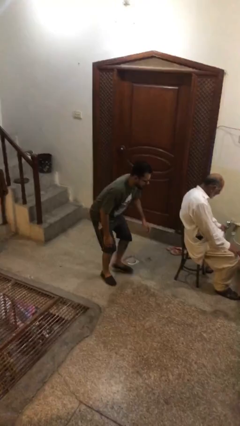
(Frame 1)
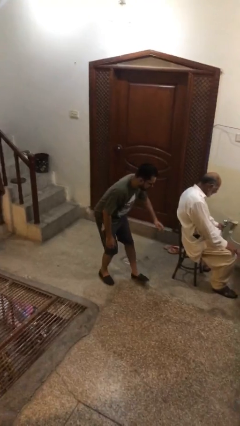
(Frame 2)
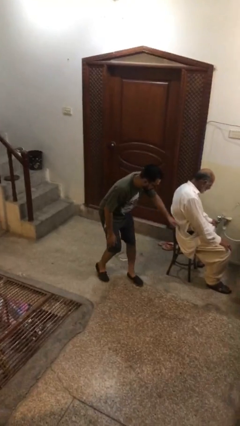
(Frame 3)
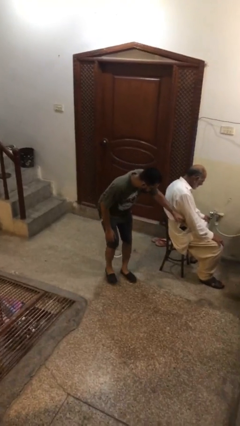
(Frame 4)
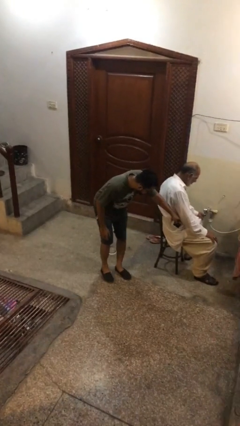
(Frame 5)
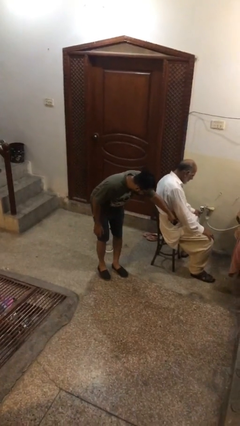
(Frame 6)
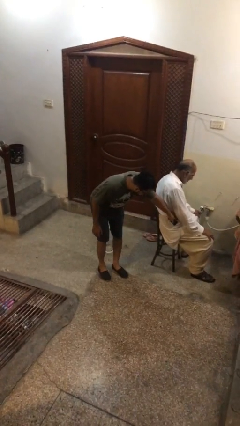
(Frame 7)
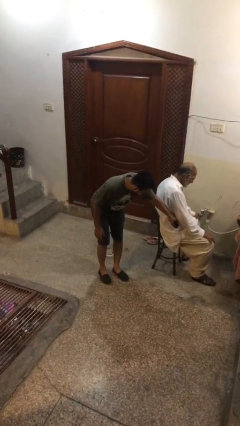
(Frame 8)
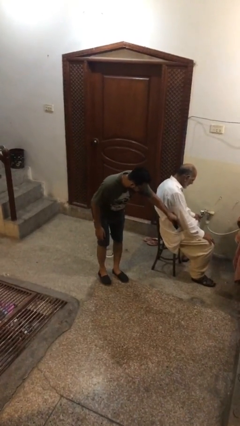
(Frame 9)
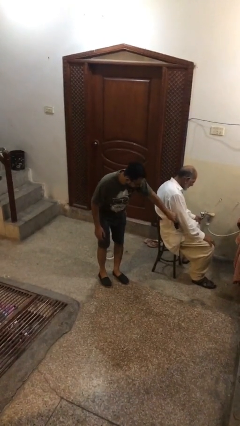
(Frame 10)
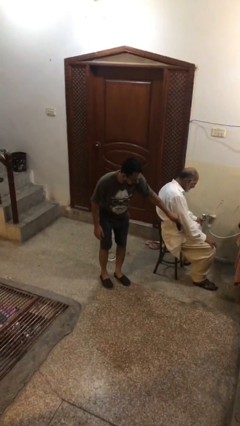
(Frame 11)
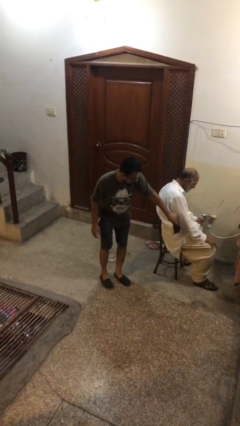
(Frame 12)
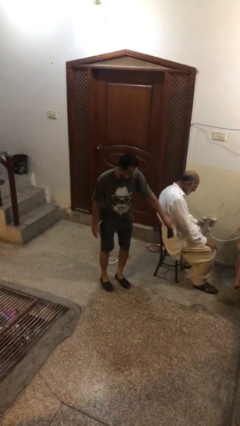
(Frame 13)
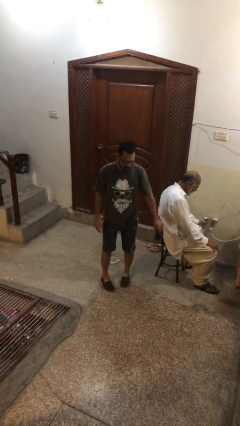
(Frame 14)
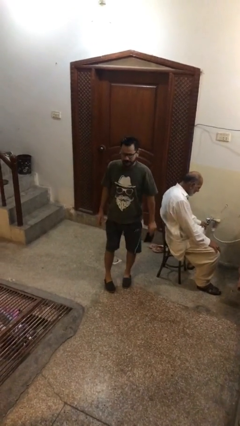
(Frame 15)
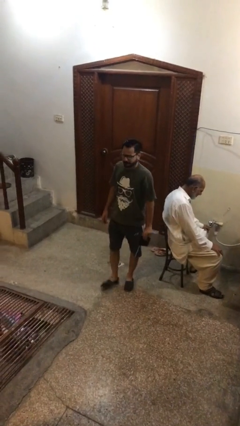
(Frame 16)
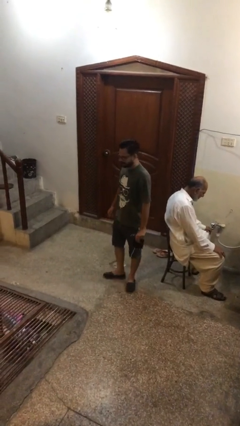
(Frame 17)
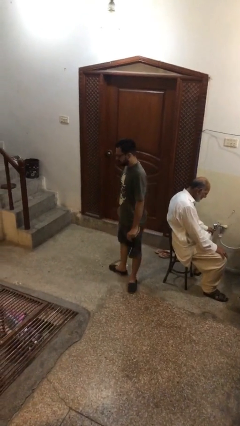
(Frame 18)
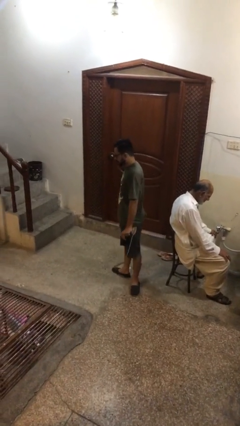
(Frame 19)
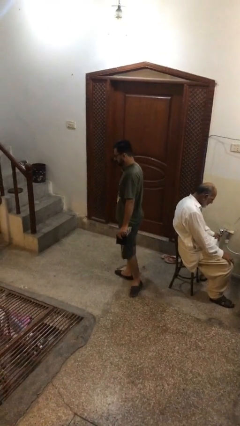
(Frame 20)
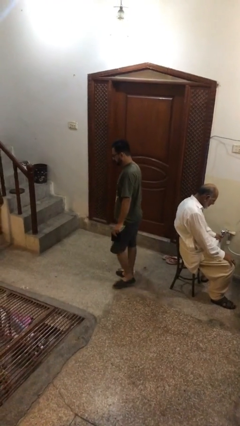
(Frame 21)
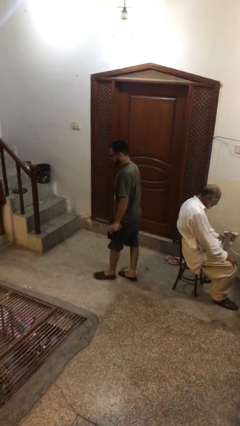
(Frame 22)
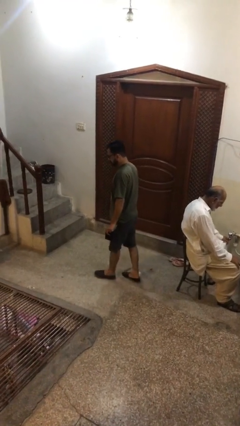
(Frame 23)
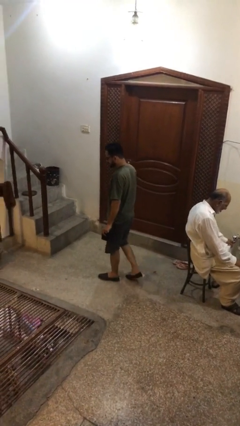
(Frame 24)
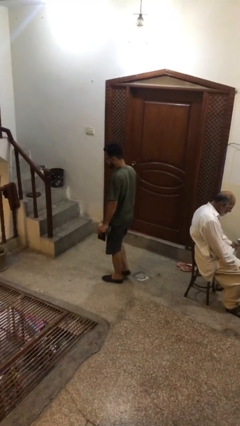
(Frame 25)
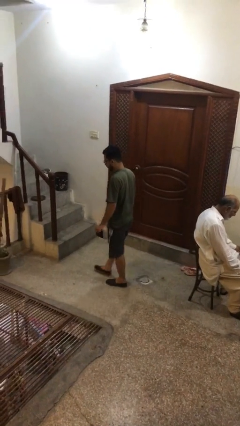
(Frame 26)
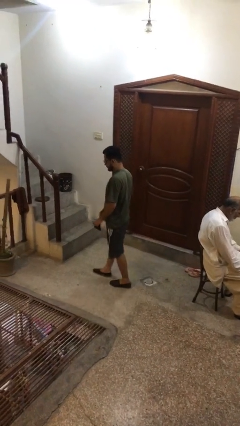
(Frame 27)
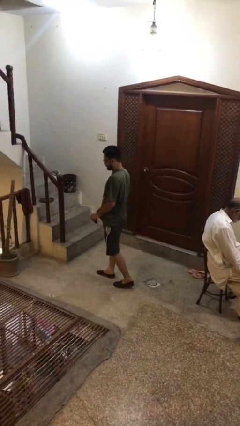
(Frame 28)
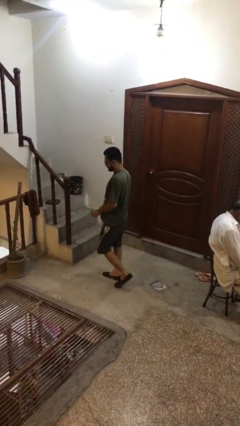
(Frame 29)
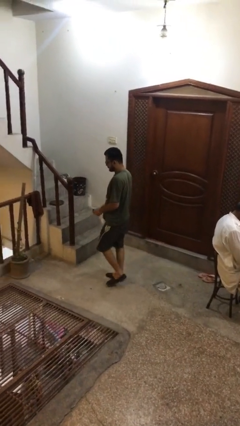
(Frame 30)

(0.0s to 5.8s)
person steals object from person

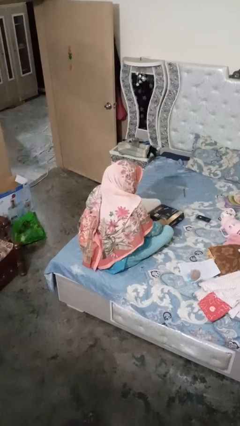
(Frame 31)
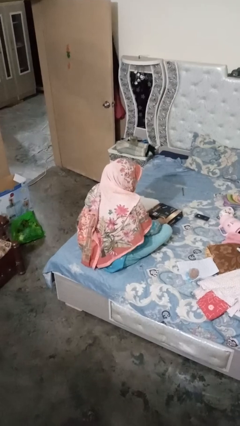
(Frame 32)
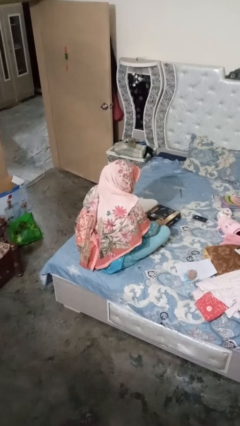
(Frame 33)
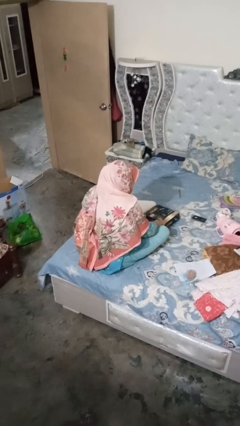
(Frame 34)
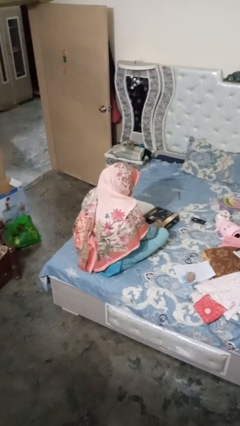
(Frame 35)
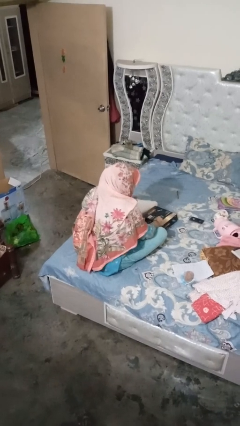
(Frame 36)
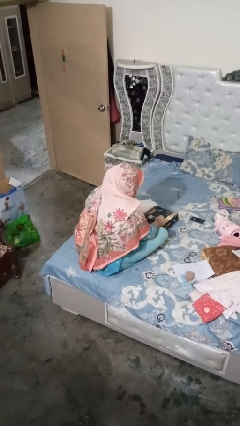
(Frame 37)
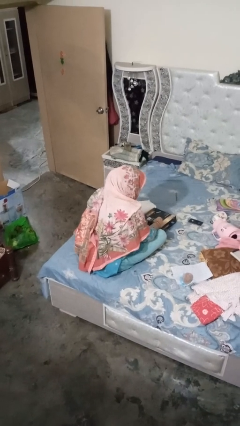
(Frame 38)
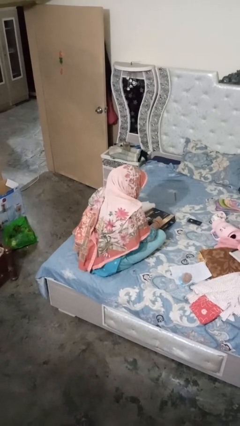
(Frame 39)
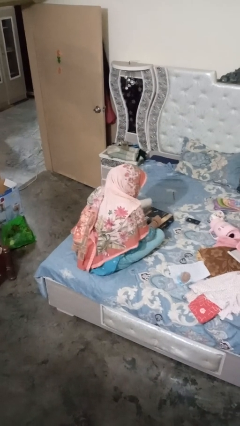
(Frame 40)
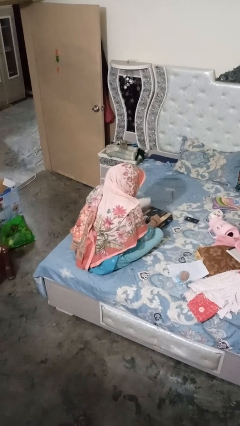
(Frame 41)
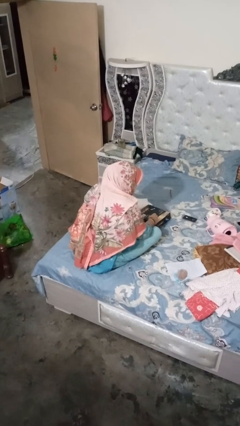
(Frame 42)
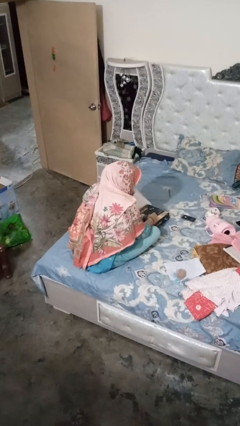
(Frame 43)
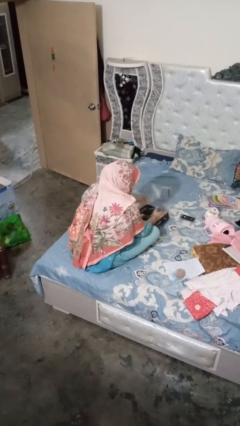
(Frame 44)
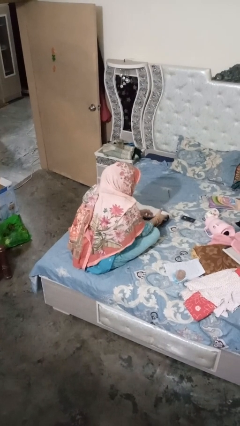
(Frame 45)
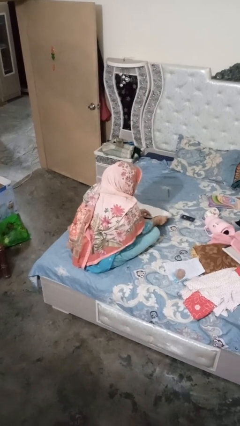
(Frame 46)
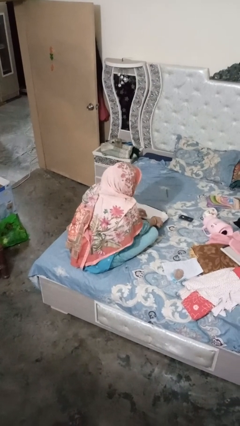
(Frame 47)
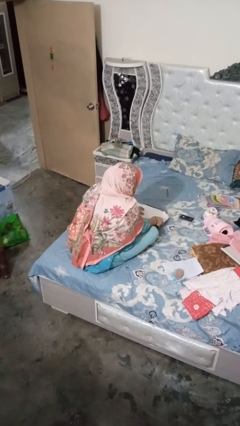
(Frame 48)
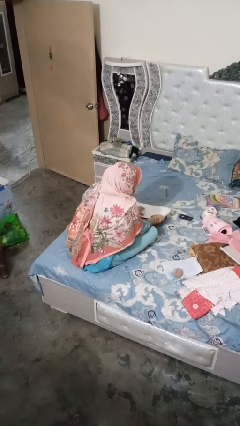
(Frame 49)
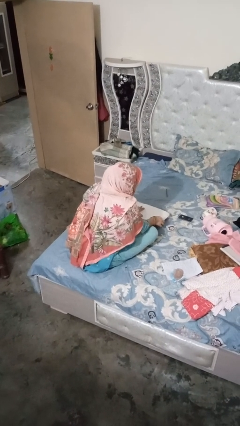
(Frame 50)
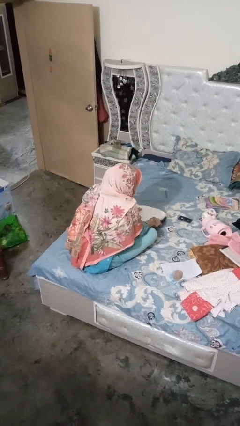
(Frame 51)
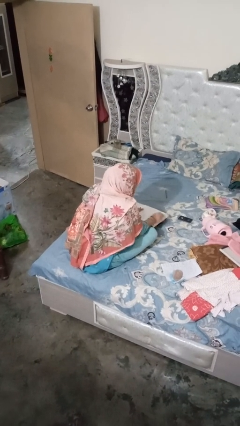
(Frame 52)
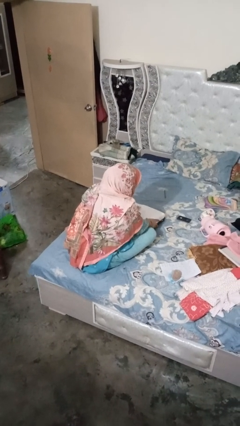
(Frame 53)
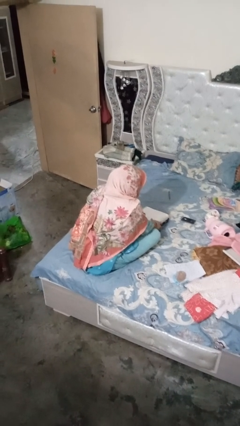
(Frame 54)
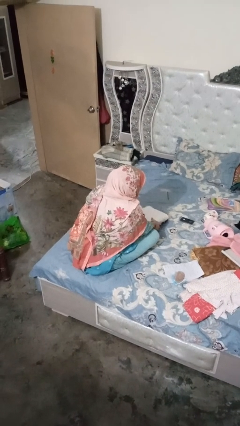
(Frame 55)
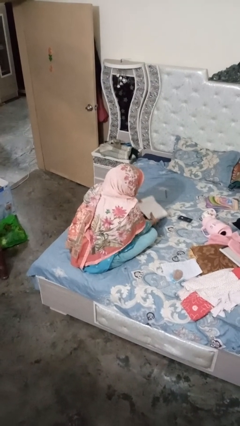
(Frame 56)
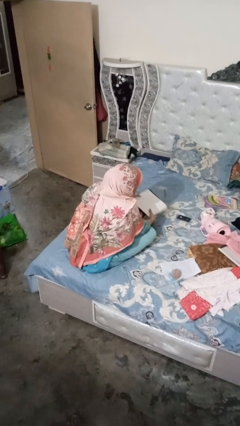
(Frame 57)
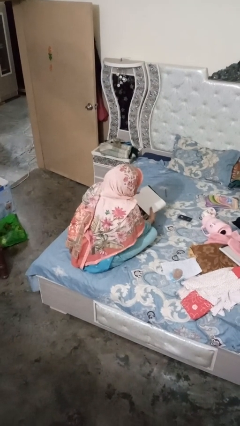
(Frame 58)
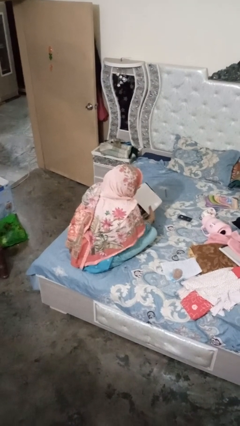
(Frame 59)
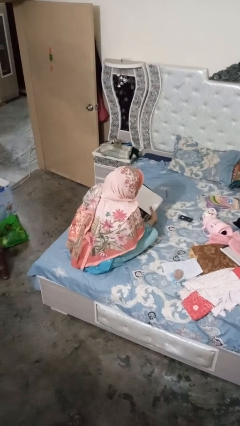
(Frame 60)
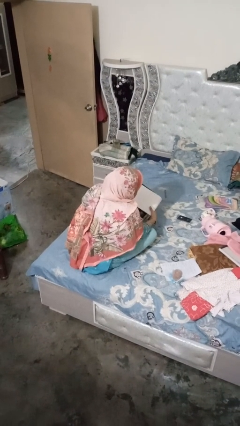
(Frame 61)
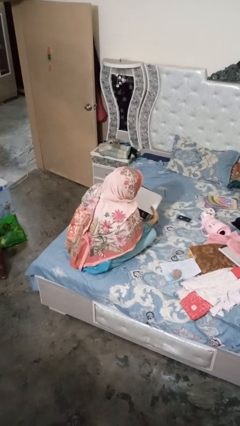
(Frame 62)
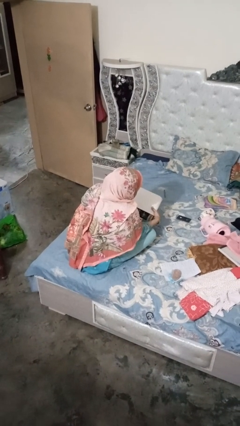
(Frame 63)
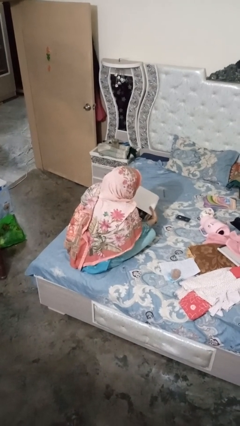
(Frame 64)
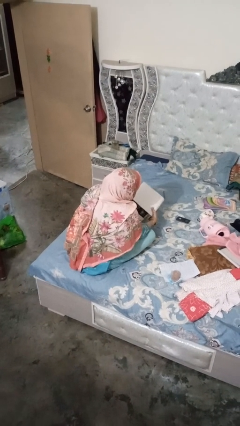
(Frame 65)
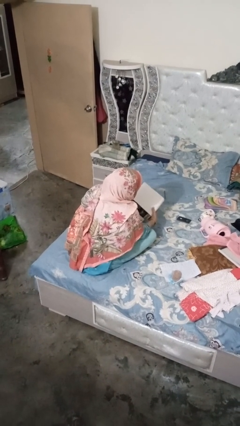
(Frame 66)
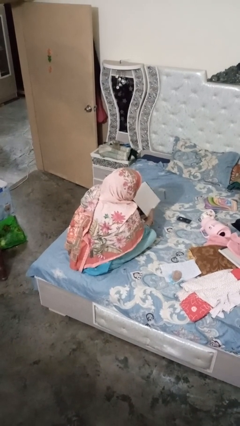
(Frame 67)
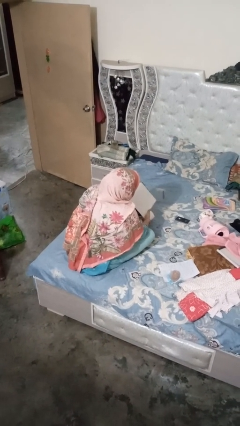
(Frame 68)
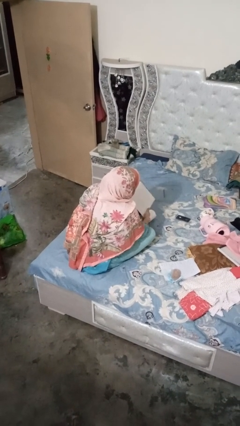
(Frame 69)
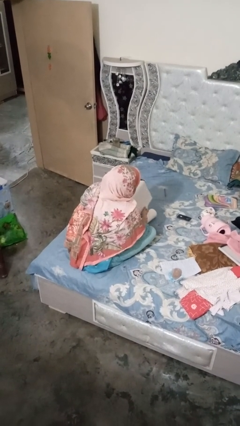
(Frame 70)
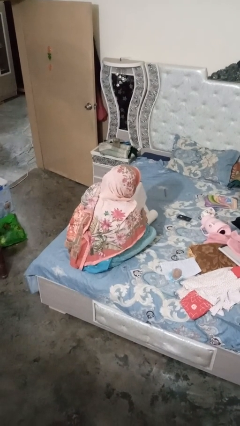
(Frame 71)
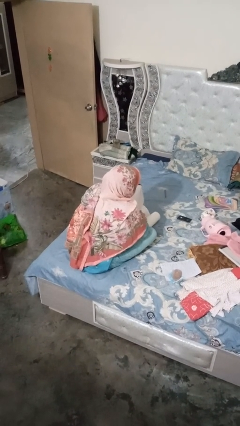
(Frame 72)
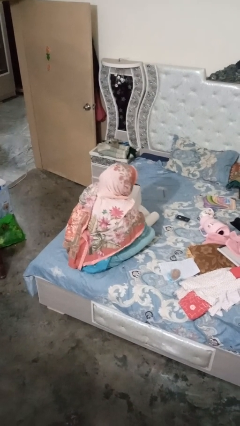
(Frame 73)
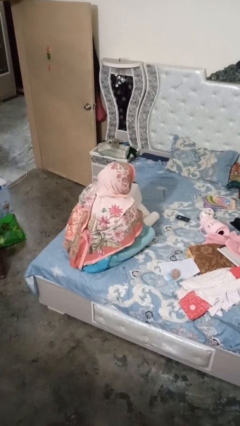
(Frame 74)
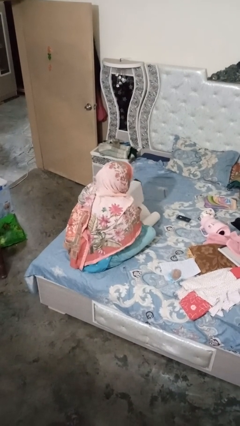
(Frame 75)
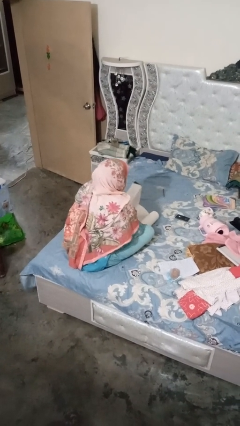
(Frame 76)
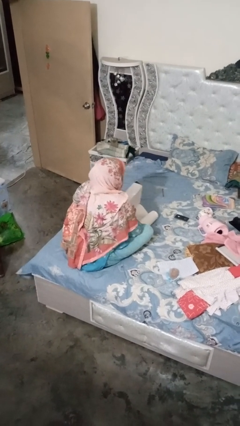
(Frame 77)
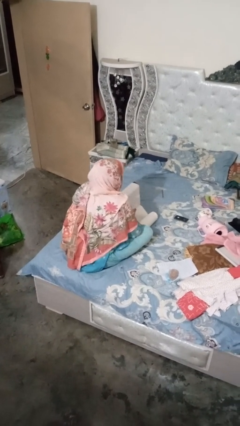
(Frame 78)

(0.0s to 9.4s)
person wraps box

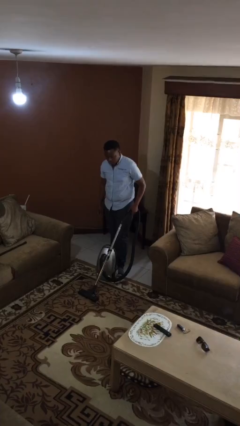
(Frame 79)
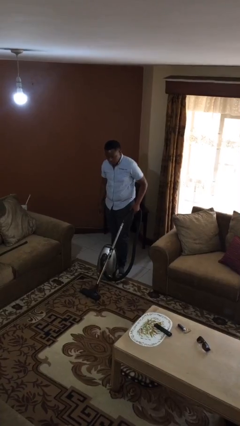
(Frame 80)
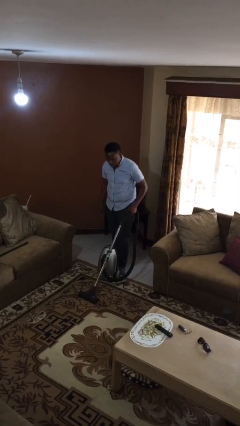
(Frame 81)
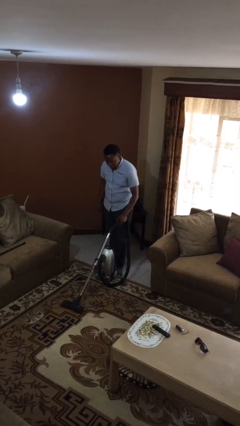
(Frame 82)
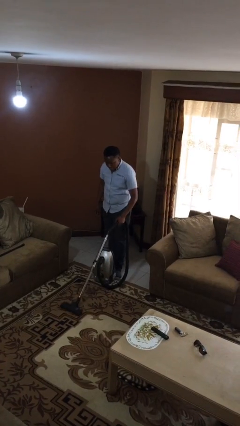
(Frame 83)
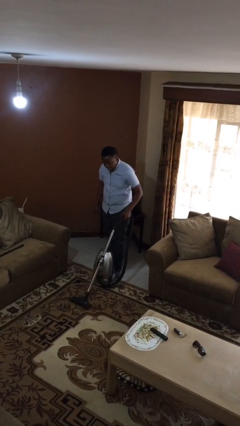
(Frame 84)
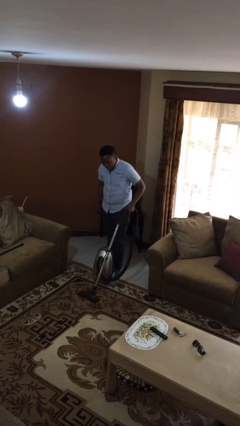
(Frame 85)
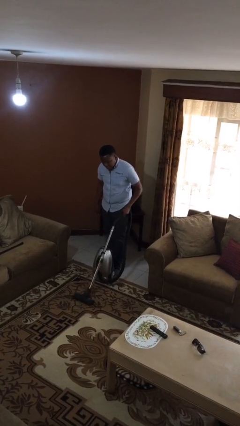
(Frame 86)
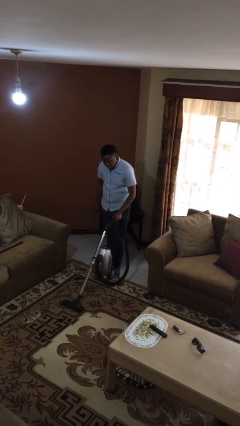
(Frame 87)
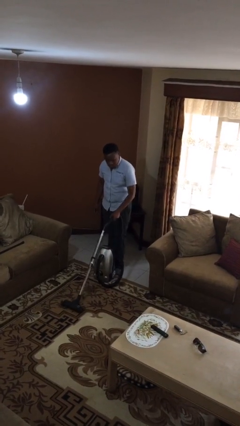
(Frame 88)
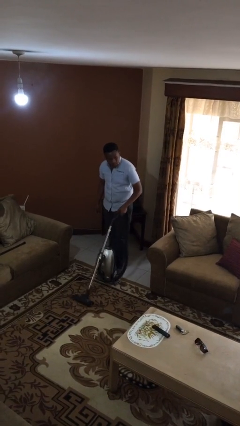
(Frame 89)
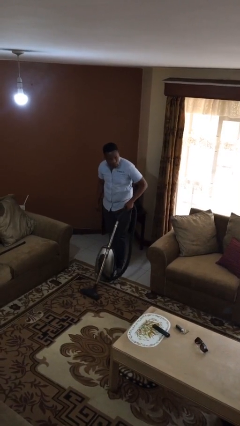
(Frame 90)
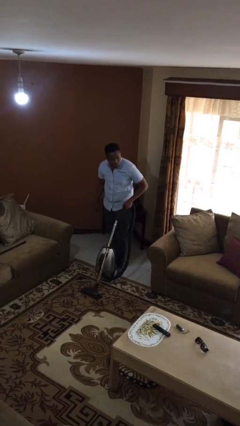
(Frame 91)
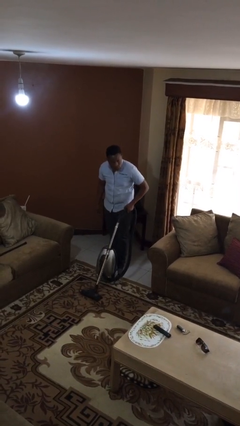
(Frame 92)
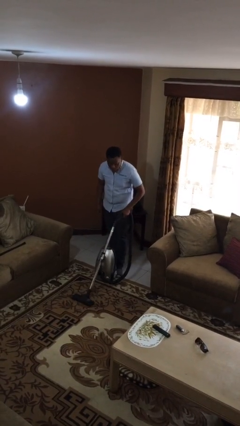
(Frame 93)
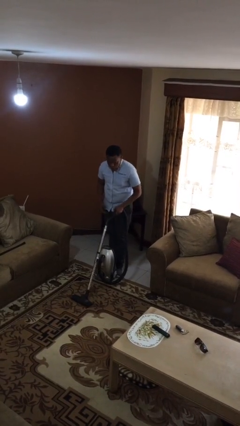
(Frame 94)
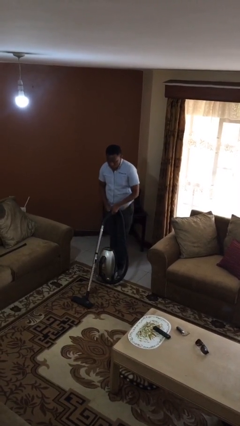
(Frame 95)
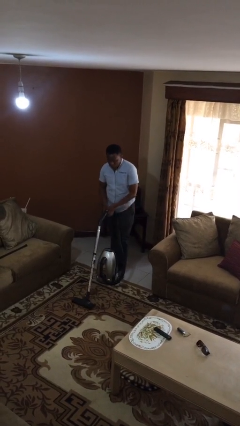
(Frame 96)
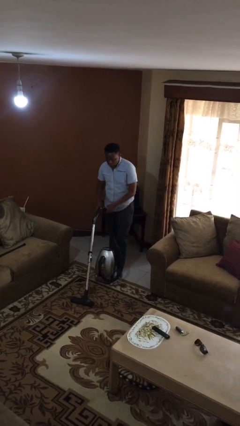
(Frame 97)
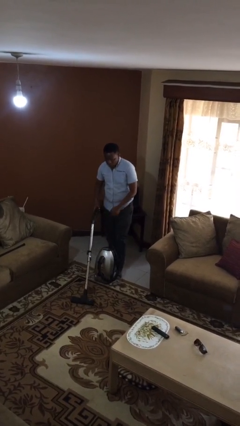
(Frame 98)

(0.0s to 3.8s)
person vacuums carpet
